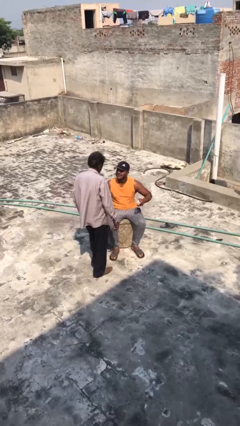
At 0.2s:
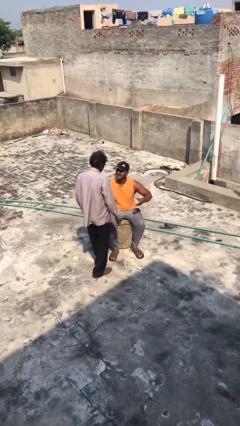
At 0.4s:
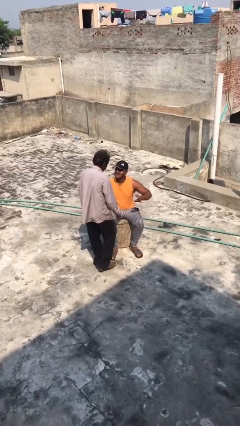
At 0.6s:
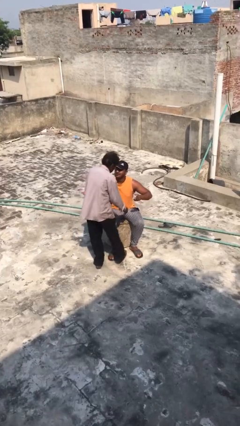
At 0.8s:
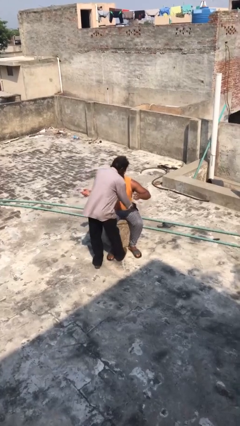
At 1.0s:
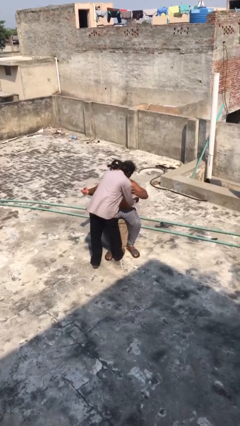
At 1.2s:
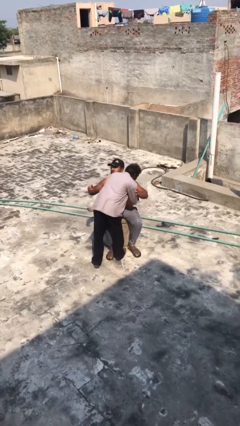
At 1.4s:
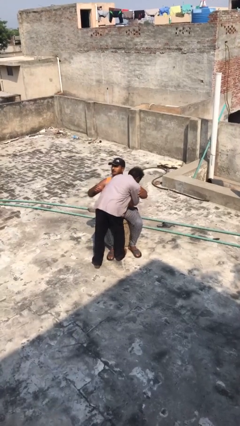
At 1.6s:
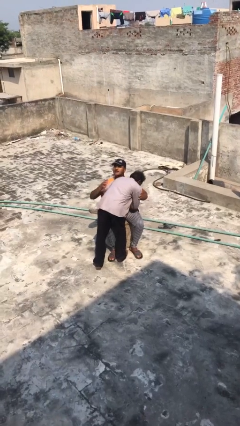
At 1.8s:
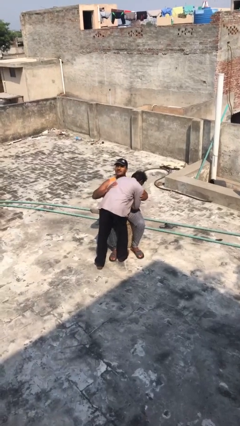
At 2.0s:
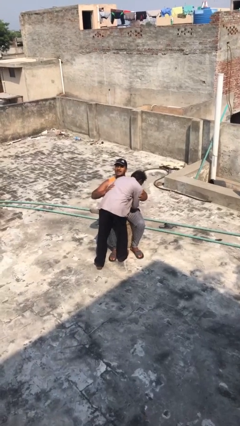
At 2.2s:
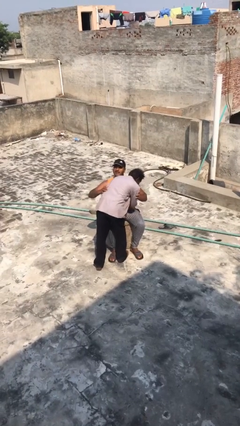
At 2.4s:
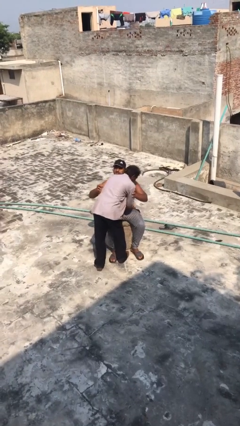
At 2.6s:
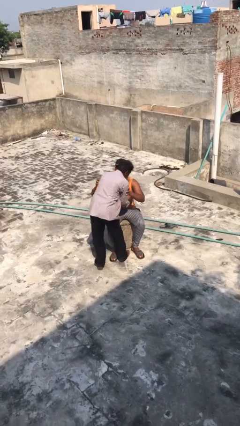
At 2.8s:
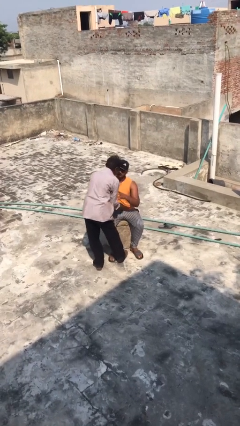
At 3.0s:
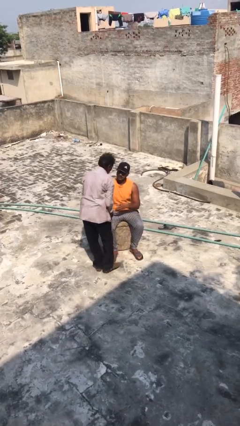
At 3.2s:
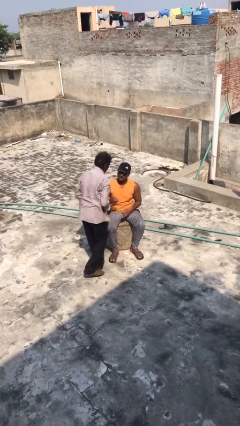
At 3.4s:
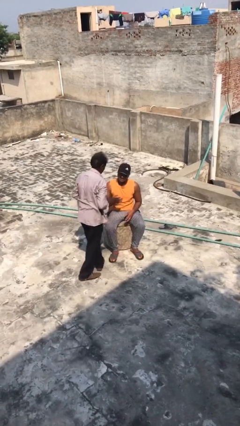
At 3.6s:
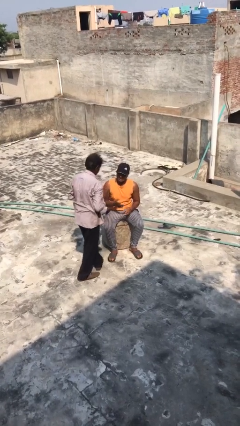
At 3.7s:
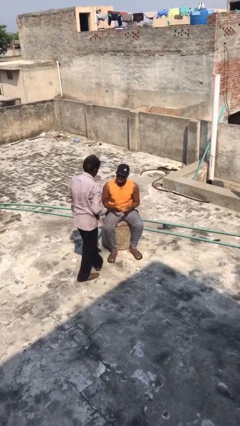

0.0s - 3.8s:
person embraces person

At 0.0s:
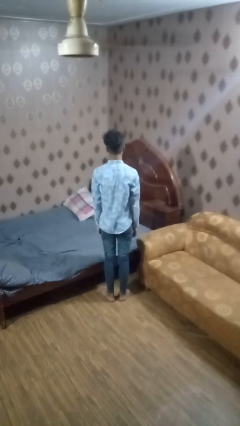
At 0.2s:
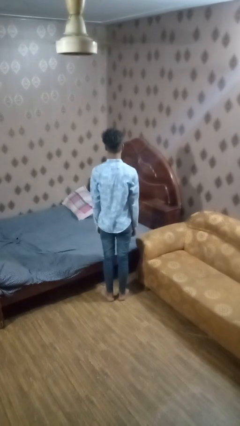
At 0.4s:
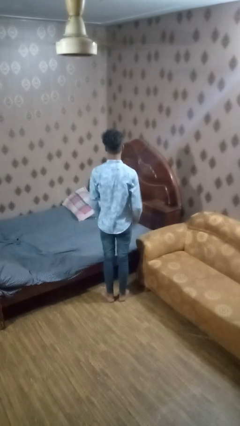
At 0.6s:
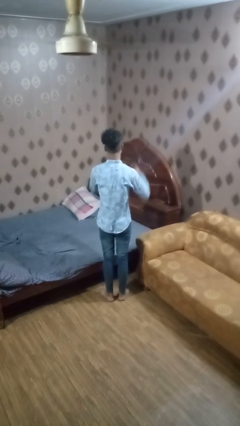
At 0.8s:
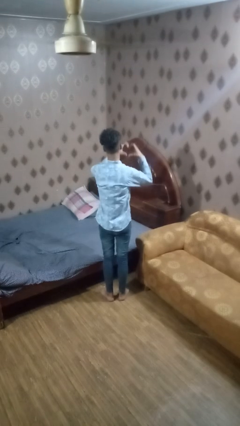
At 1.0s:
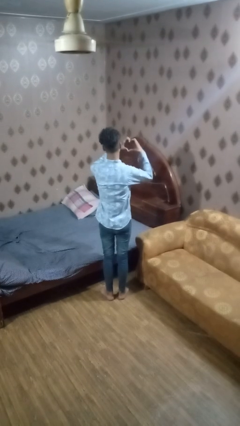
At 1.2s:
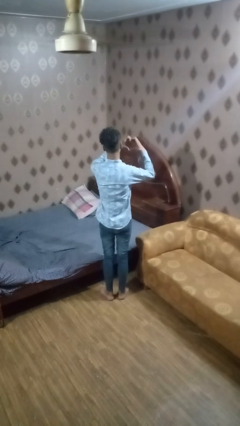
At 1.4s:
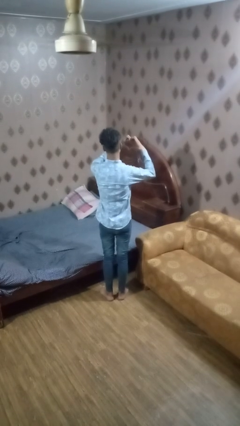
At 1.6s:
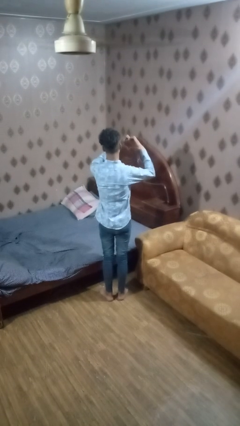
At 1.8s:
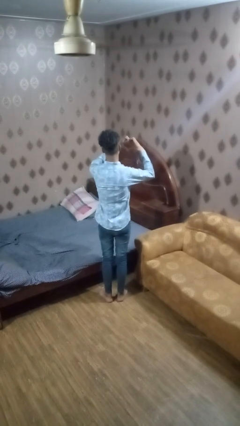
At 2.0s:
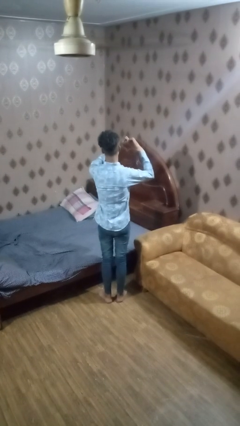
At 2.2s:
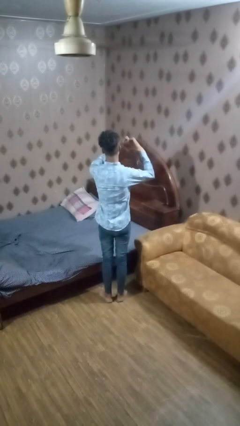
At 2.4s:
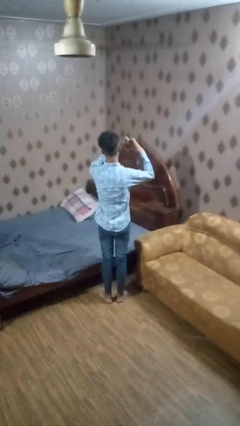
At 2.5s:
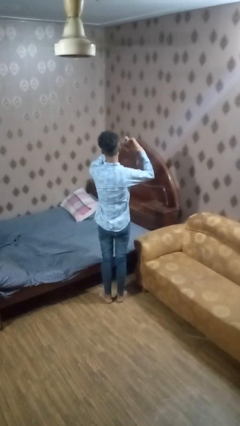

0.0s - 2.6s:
person gestures heart

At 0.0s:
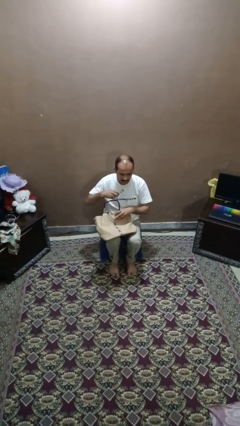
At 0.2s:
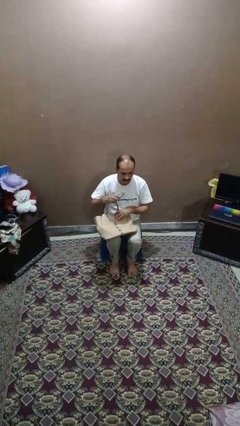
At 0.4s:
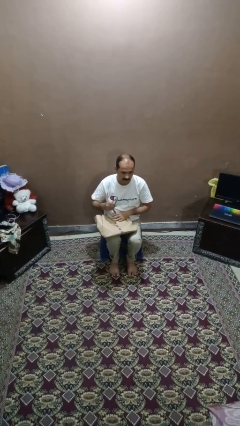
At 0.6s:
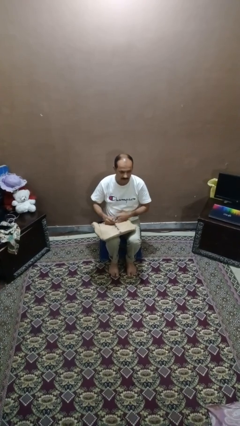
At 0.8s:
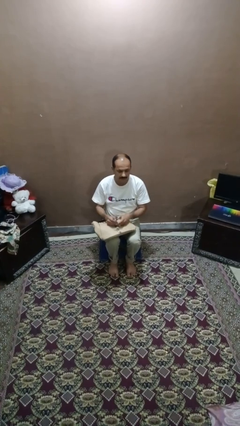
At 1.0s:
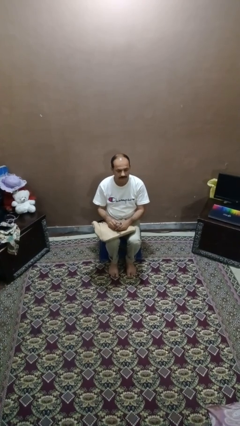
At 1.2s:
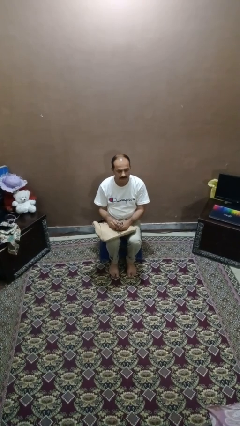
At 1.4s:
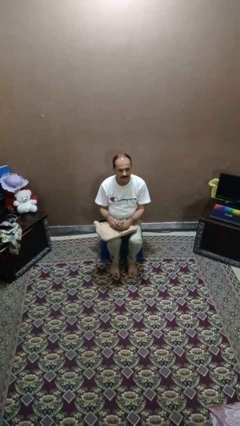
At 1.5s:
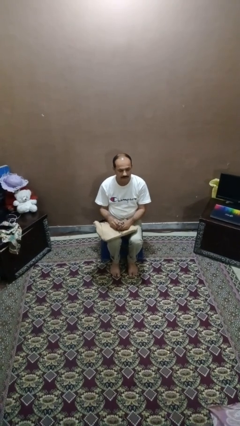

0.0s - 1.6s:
person takes object from purse

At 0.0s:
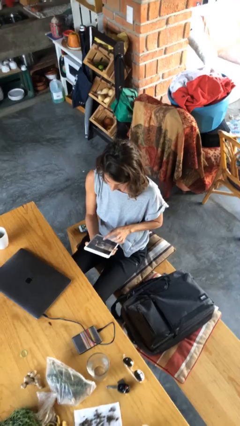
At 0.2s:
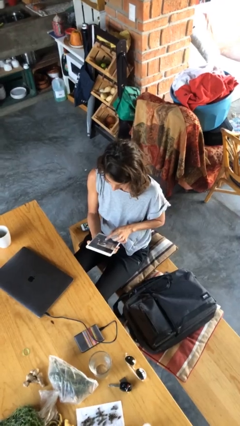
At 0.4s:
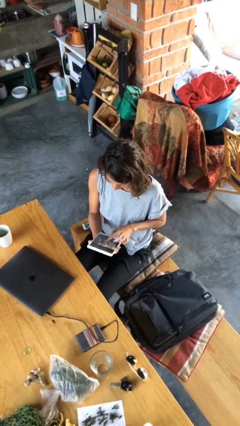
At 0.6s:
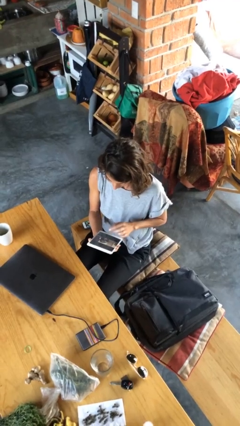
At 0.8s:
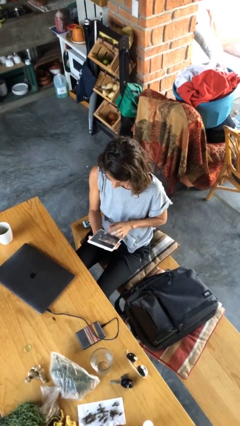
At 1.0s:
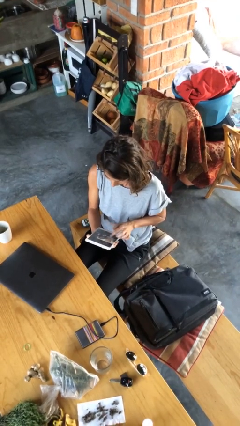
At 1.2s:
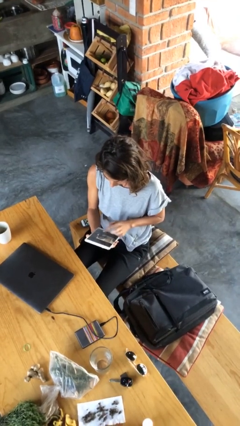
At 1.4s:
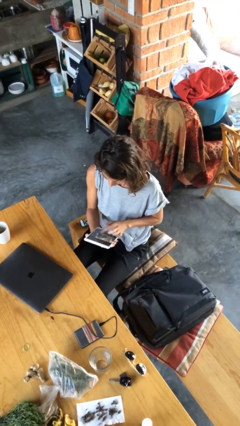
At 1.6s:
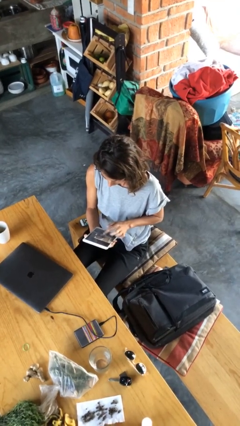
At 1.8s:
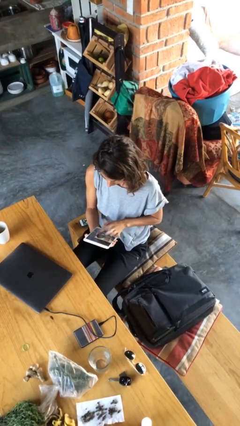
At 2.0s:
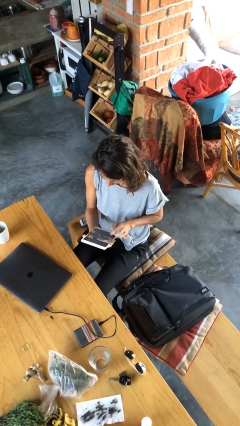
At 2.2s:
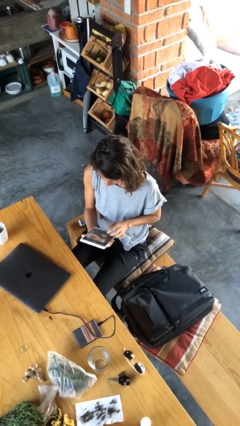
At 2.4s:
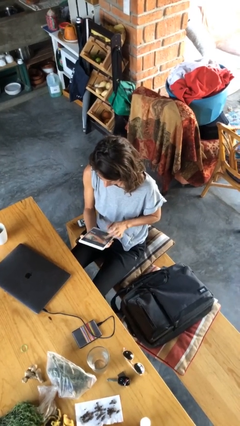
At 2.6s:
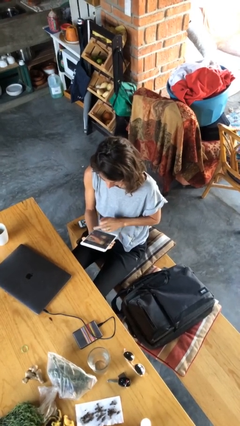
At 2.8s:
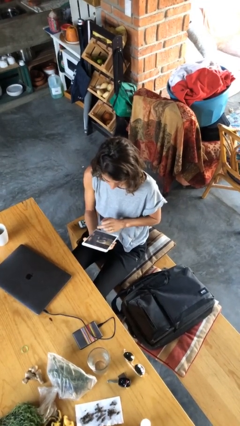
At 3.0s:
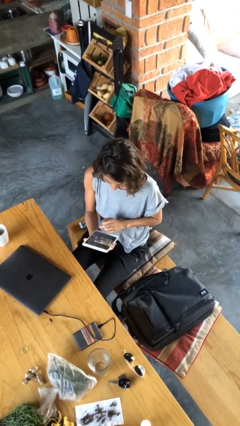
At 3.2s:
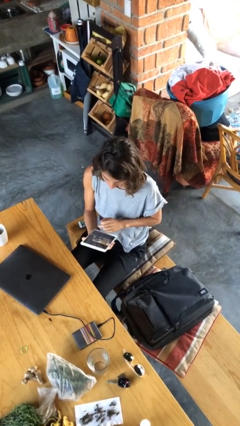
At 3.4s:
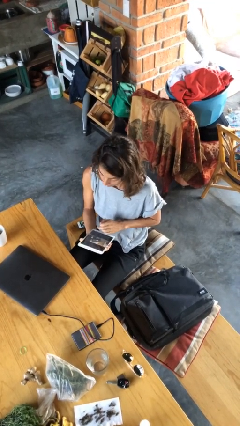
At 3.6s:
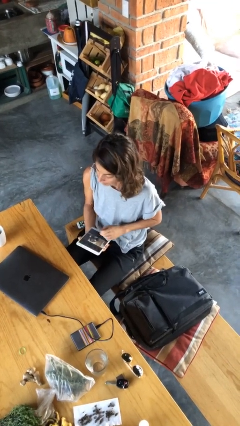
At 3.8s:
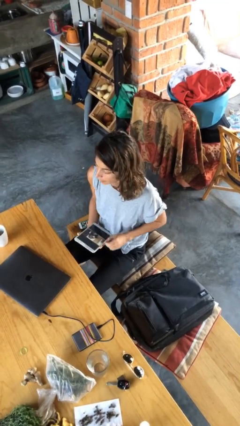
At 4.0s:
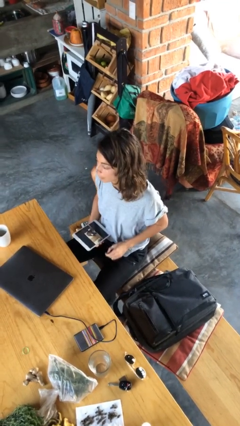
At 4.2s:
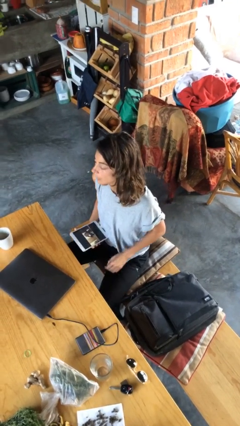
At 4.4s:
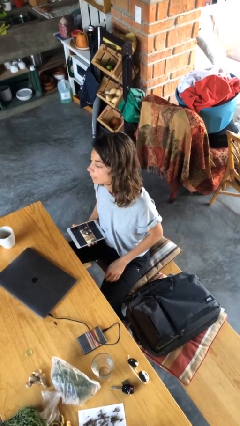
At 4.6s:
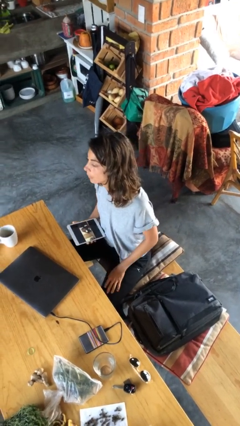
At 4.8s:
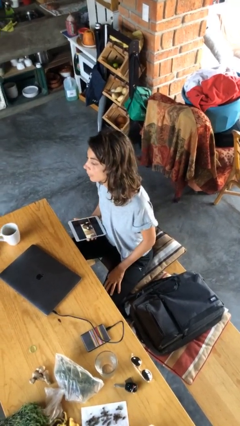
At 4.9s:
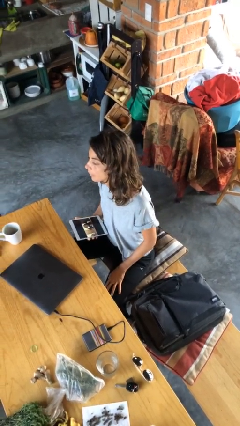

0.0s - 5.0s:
person interacts with tablet

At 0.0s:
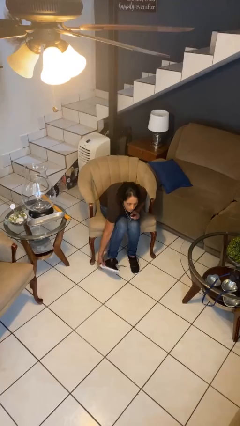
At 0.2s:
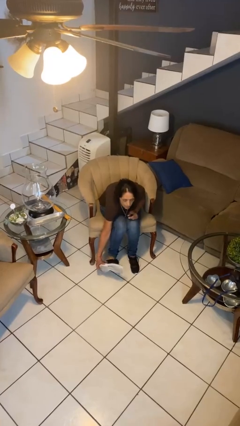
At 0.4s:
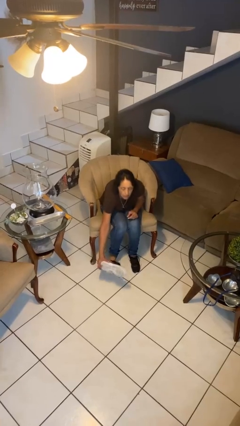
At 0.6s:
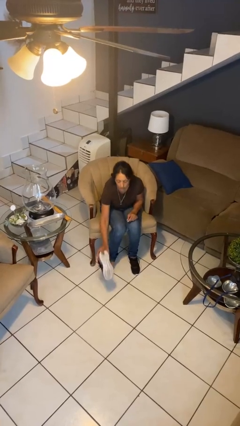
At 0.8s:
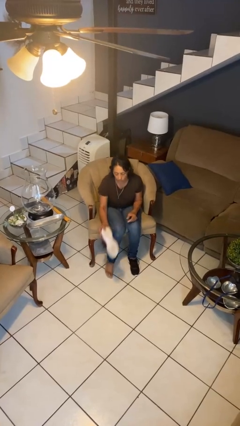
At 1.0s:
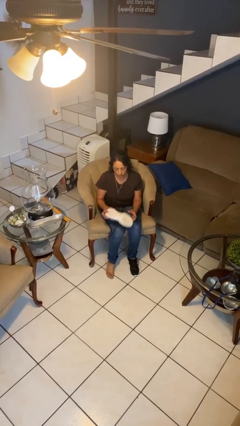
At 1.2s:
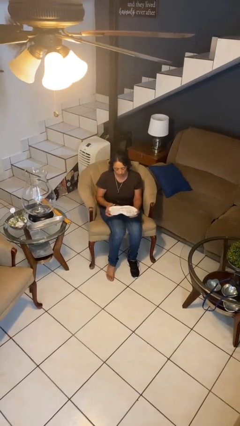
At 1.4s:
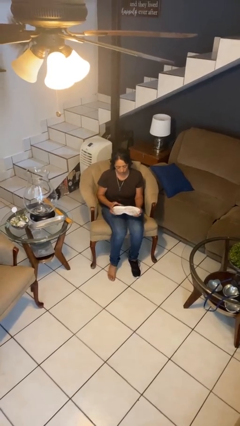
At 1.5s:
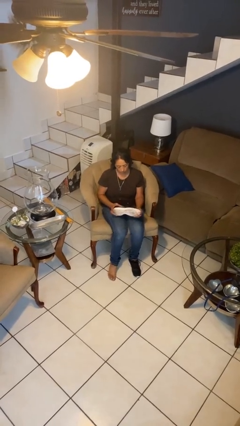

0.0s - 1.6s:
person takes off shoes

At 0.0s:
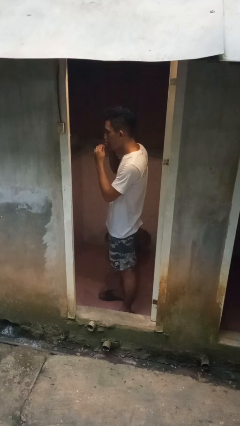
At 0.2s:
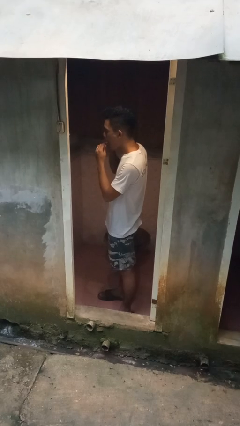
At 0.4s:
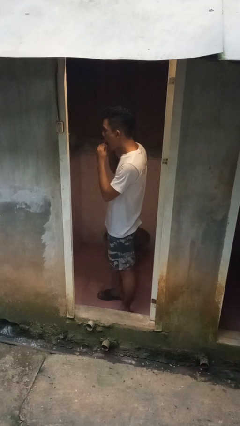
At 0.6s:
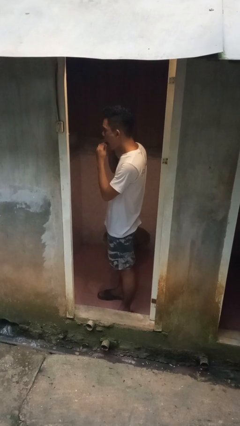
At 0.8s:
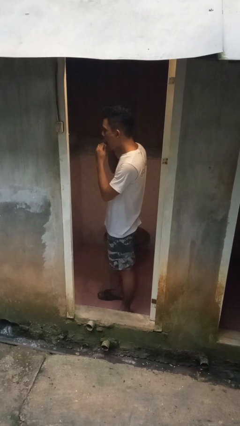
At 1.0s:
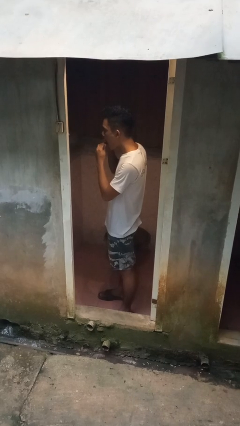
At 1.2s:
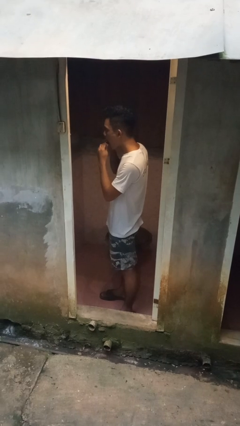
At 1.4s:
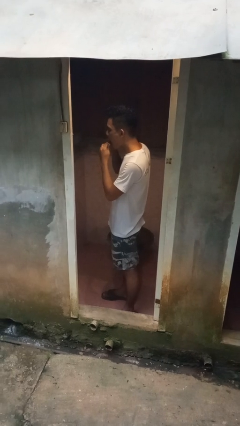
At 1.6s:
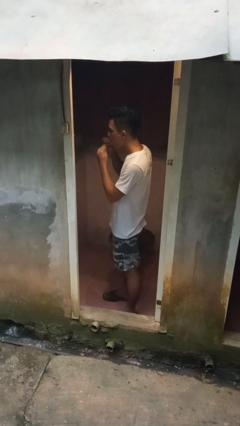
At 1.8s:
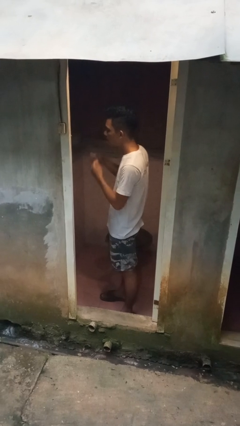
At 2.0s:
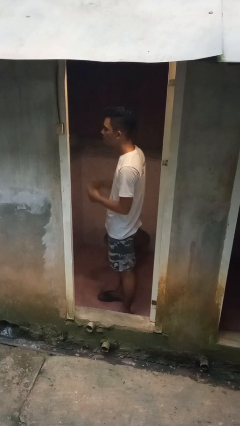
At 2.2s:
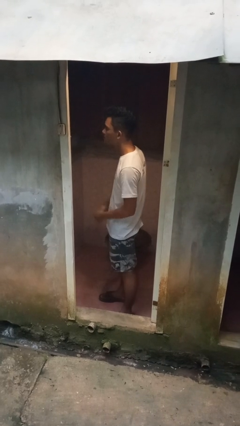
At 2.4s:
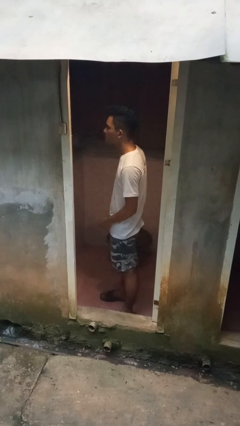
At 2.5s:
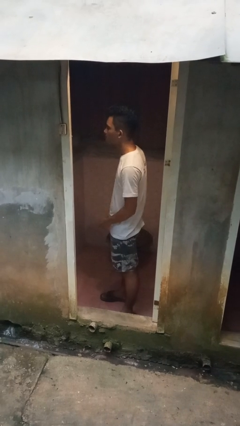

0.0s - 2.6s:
person flosses

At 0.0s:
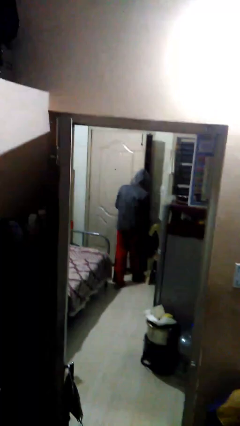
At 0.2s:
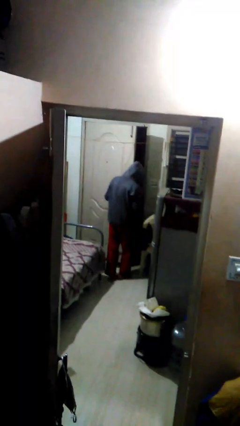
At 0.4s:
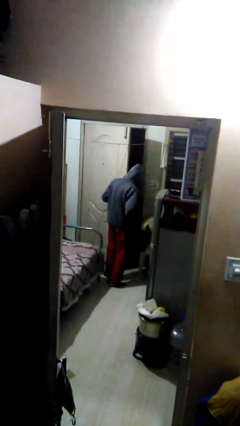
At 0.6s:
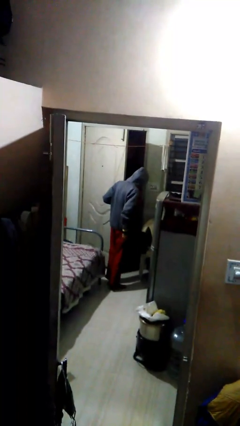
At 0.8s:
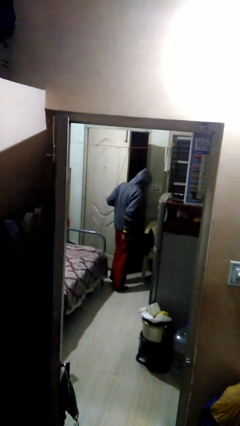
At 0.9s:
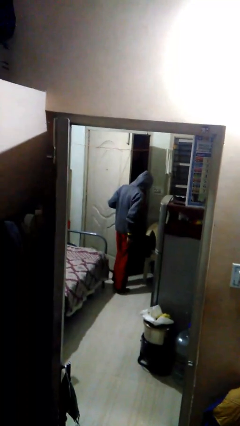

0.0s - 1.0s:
person opens facility door
